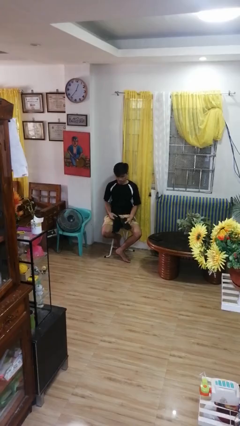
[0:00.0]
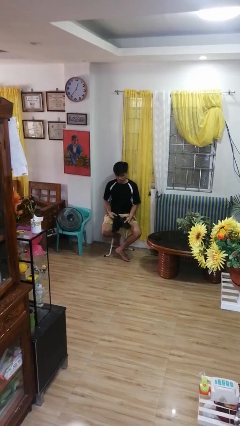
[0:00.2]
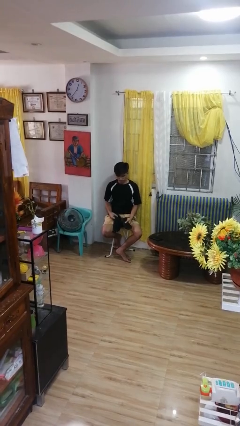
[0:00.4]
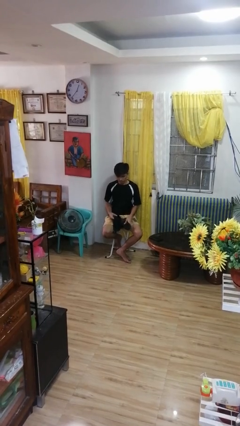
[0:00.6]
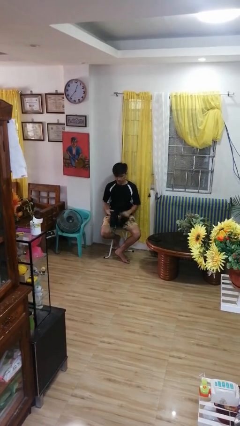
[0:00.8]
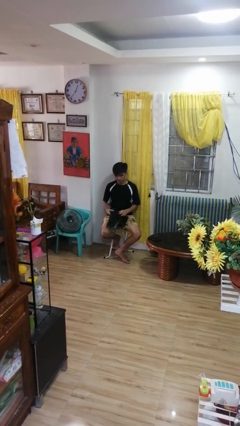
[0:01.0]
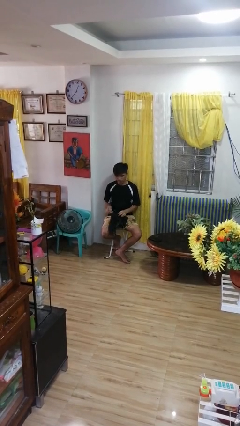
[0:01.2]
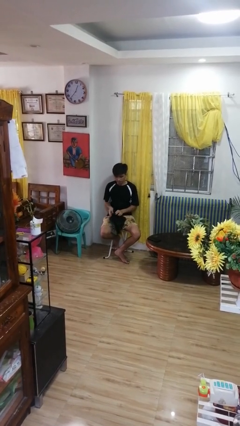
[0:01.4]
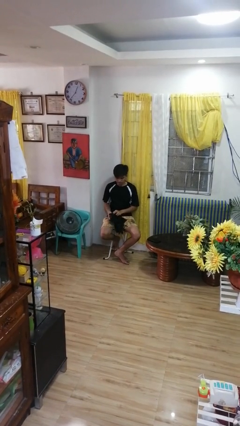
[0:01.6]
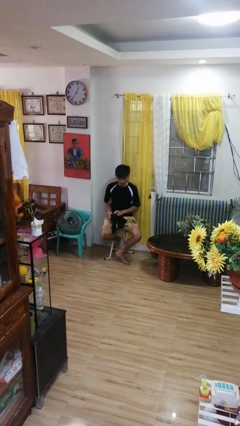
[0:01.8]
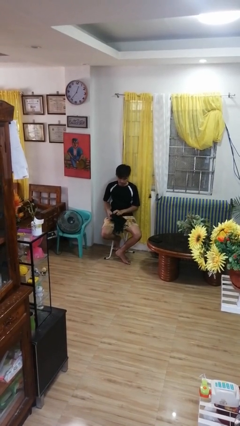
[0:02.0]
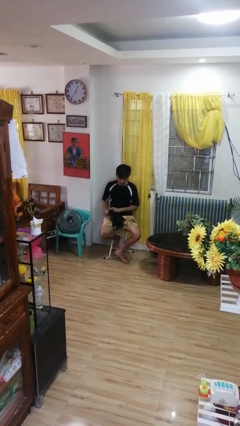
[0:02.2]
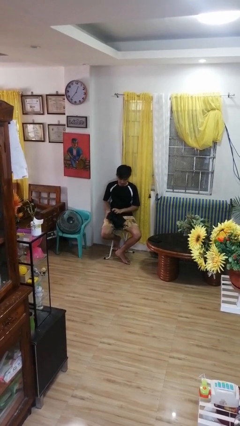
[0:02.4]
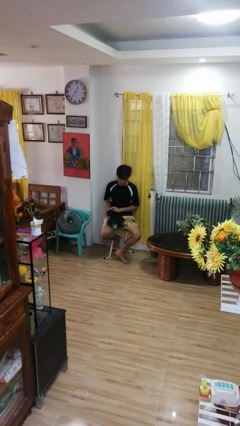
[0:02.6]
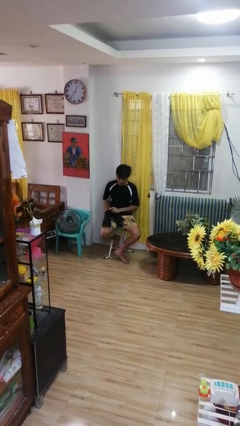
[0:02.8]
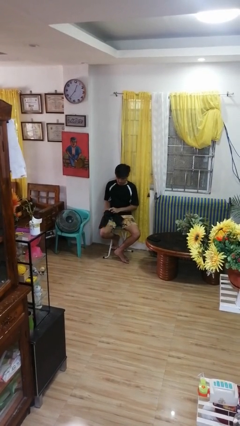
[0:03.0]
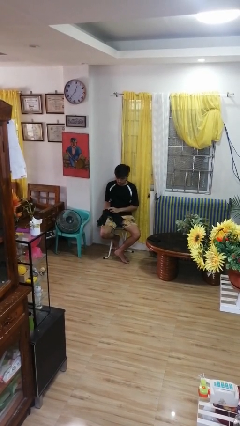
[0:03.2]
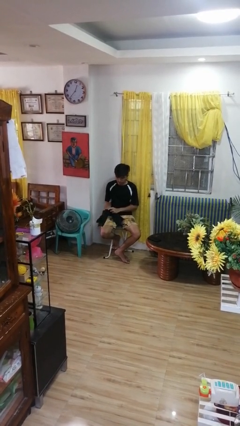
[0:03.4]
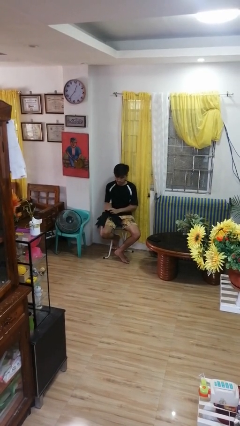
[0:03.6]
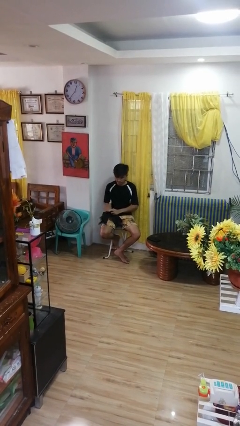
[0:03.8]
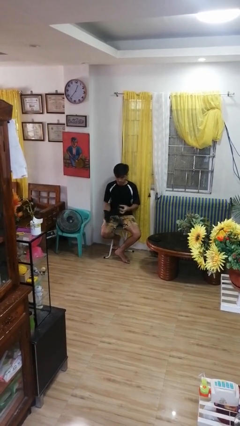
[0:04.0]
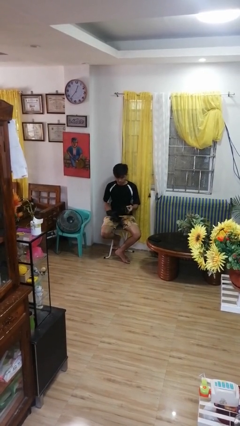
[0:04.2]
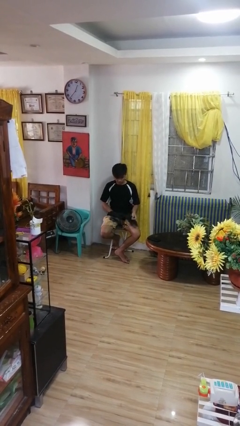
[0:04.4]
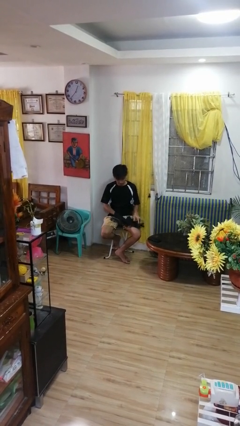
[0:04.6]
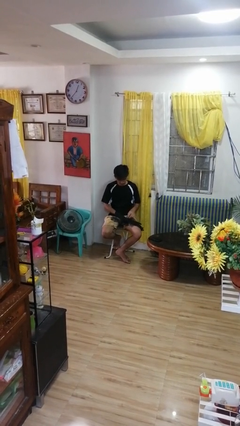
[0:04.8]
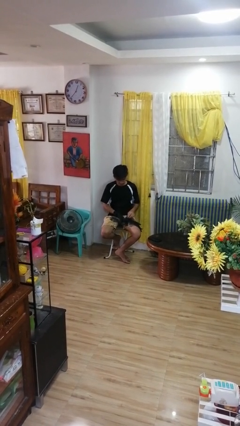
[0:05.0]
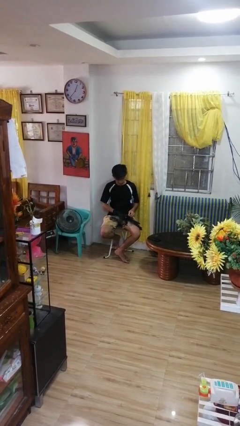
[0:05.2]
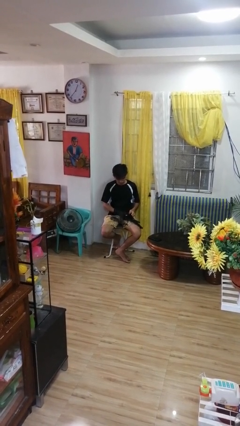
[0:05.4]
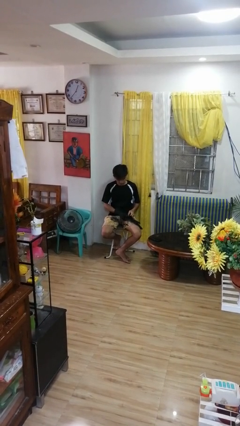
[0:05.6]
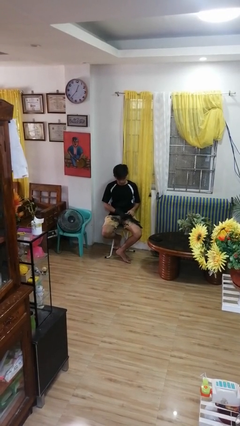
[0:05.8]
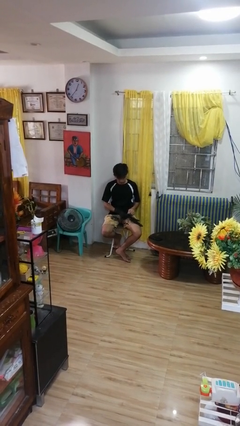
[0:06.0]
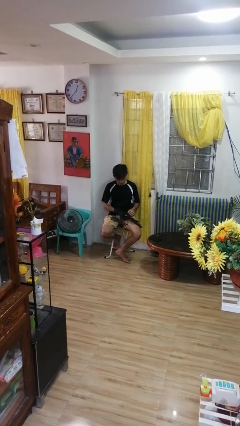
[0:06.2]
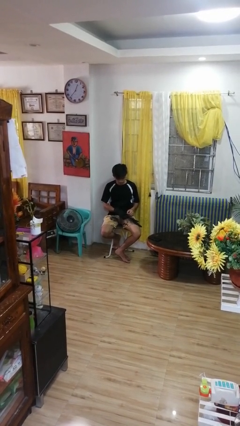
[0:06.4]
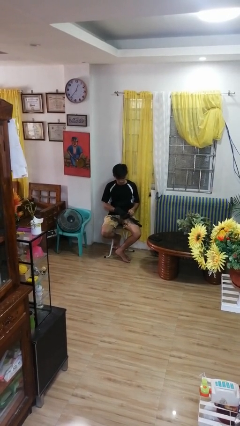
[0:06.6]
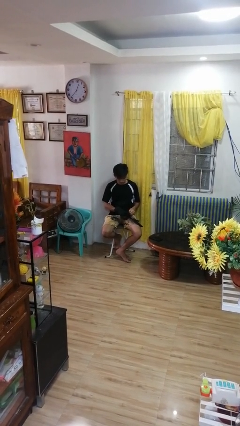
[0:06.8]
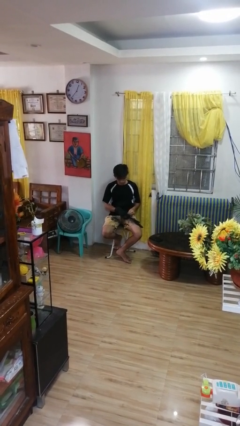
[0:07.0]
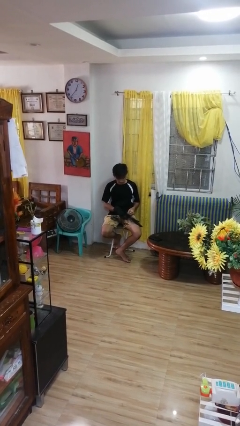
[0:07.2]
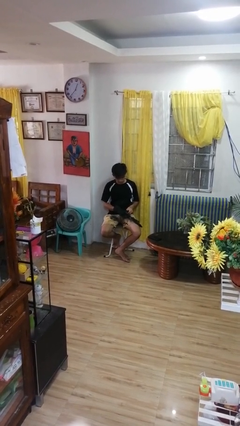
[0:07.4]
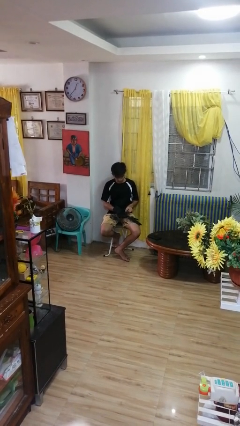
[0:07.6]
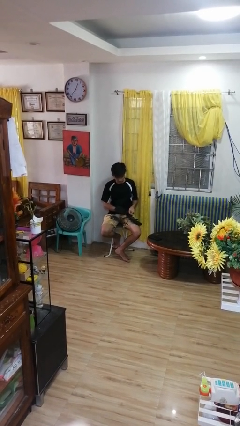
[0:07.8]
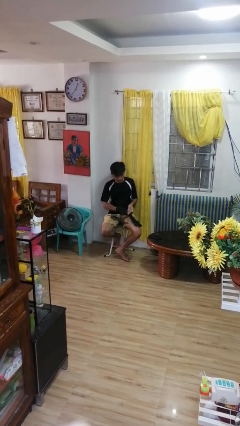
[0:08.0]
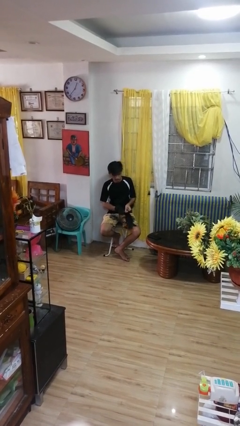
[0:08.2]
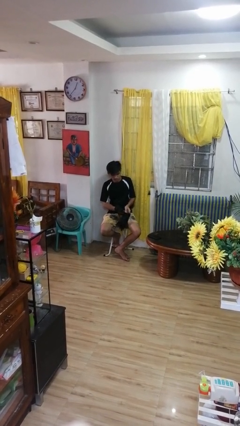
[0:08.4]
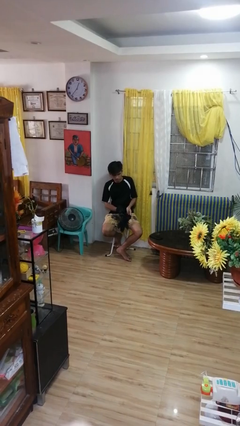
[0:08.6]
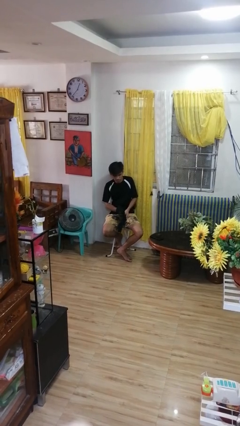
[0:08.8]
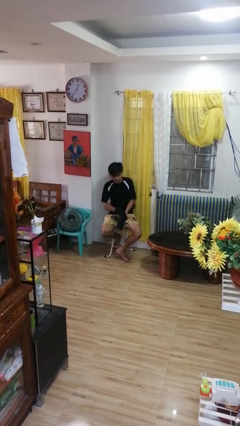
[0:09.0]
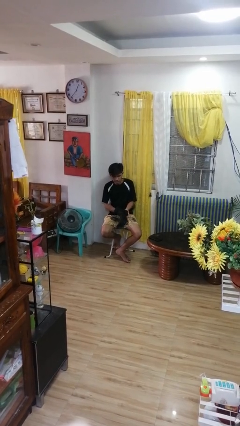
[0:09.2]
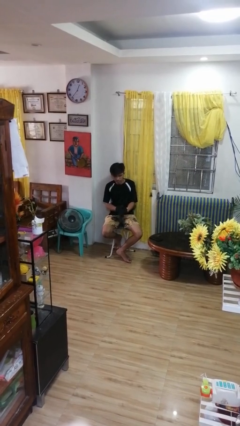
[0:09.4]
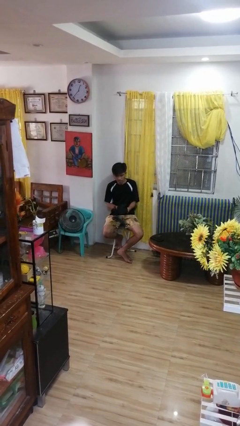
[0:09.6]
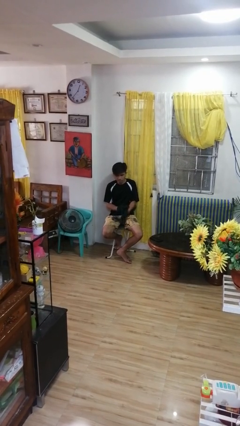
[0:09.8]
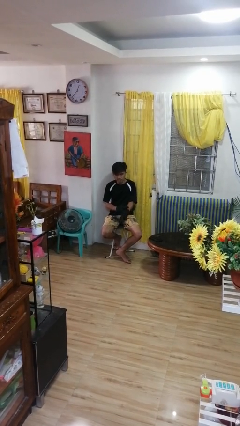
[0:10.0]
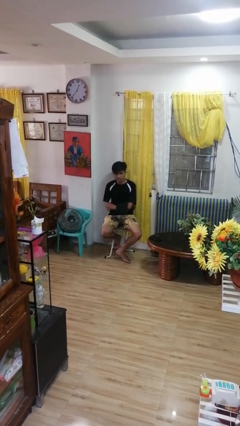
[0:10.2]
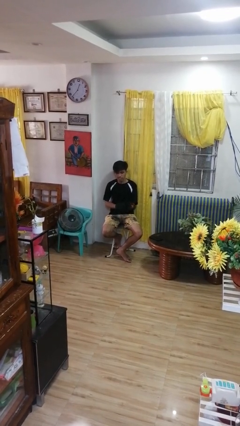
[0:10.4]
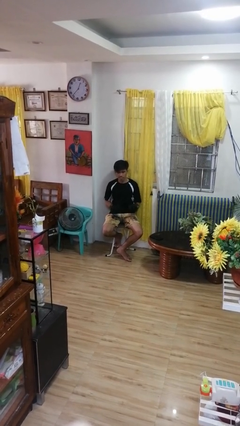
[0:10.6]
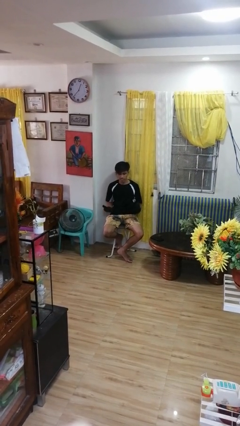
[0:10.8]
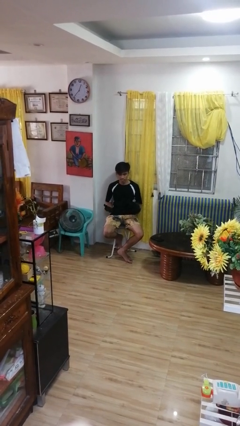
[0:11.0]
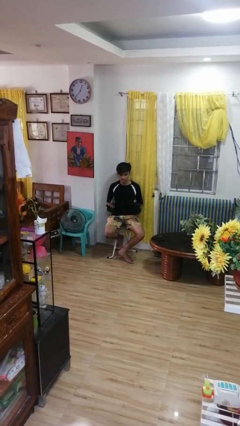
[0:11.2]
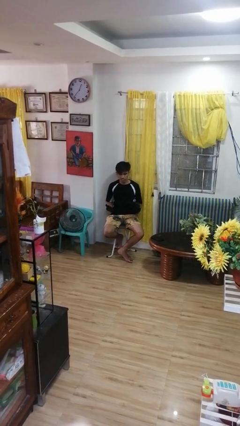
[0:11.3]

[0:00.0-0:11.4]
person puts on gloves

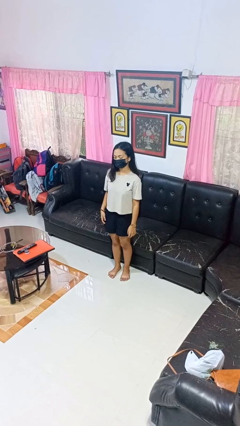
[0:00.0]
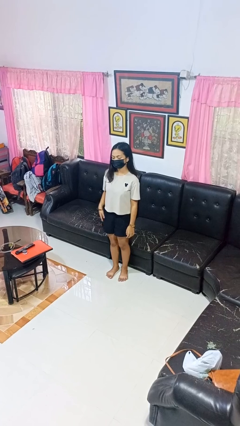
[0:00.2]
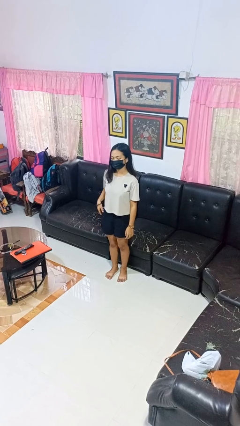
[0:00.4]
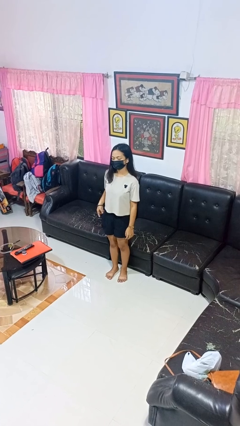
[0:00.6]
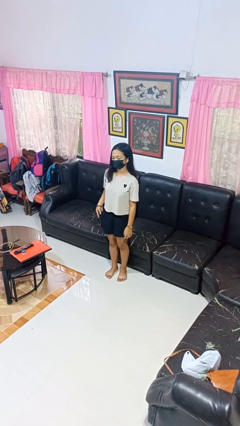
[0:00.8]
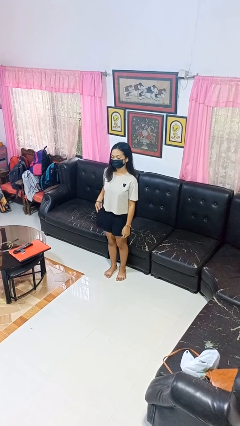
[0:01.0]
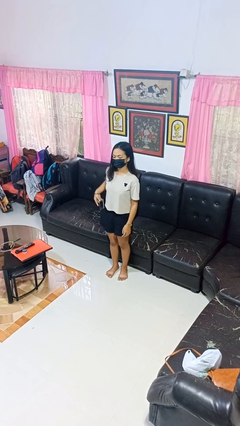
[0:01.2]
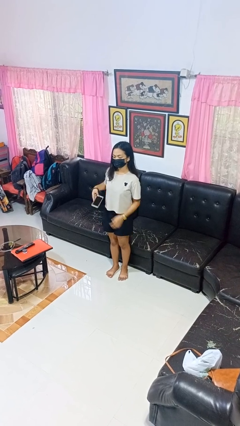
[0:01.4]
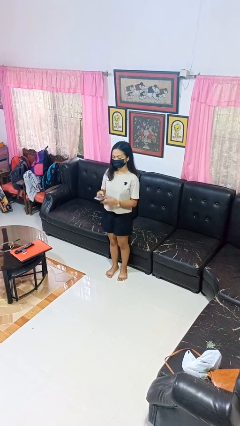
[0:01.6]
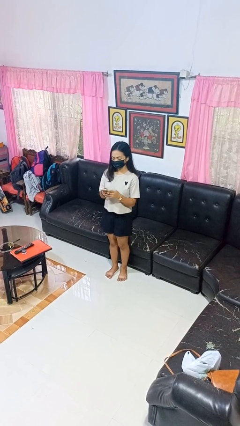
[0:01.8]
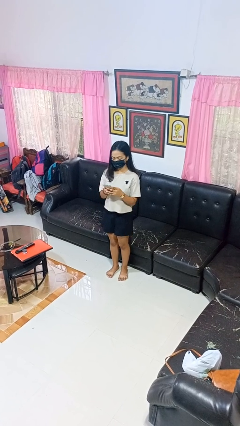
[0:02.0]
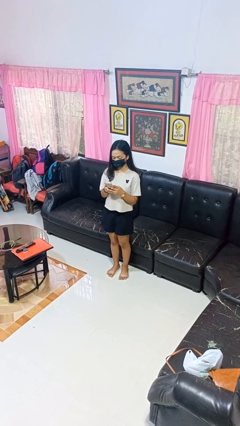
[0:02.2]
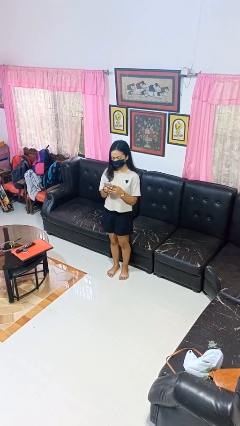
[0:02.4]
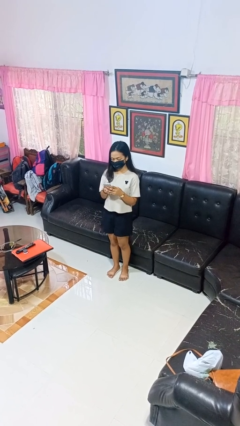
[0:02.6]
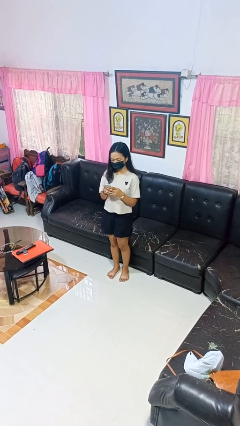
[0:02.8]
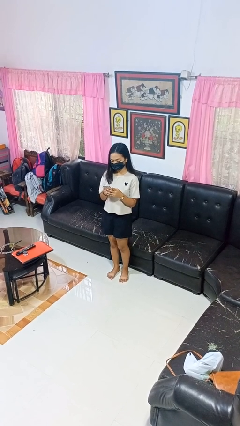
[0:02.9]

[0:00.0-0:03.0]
person takes phone from pocket

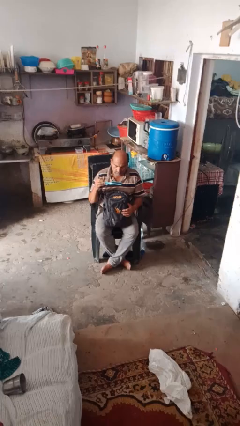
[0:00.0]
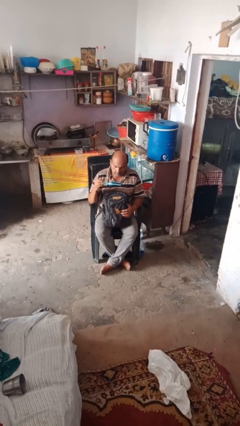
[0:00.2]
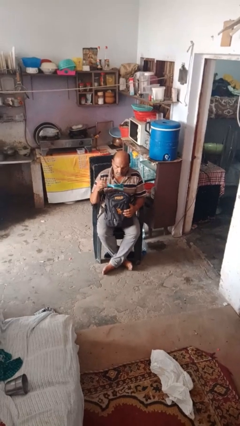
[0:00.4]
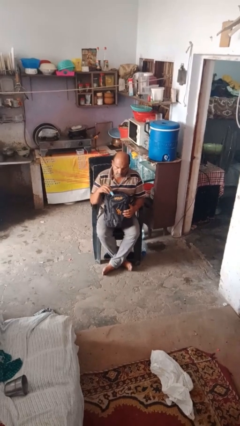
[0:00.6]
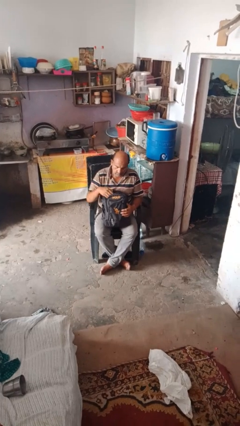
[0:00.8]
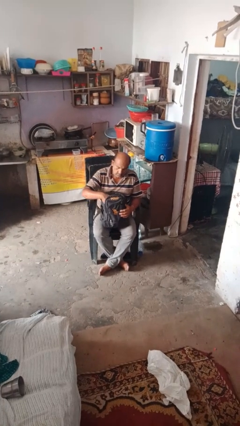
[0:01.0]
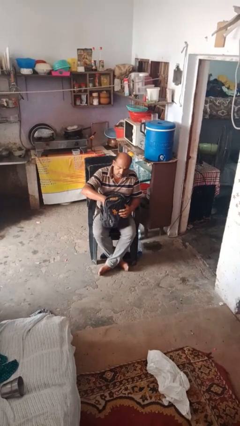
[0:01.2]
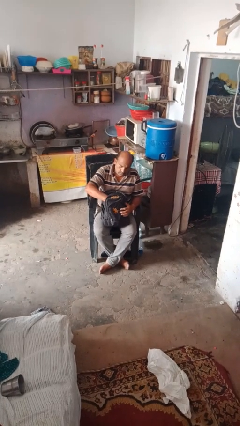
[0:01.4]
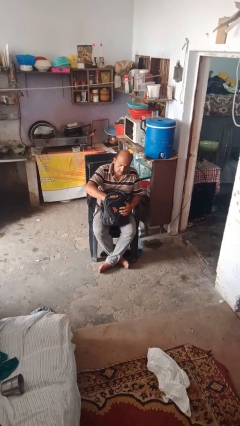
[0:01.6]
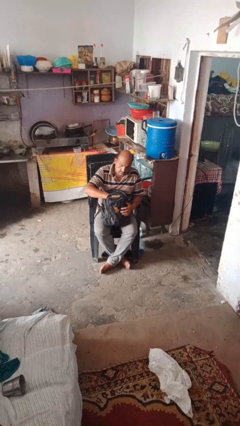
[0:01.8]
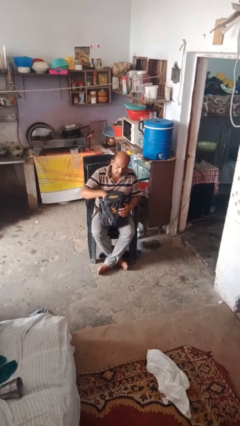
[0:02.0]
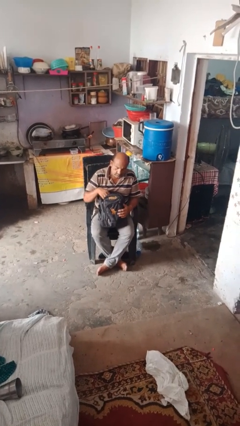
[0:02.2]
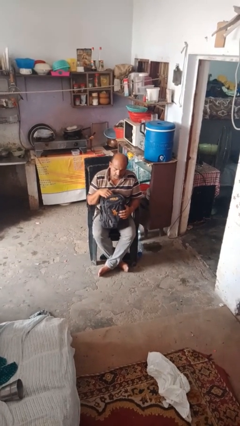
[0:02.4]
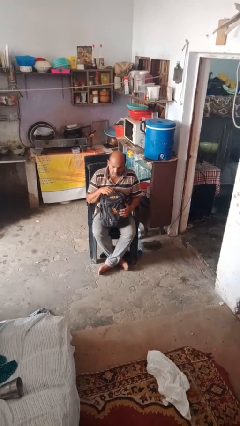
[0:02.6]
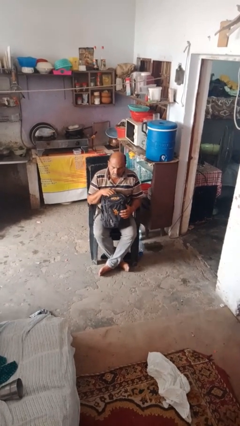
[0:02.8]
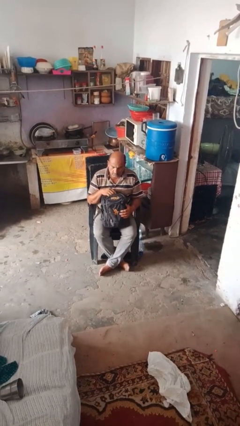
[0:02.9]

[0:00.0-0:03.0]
person puts object into backpack

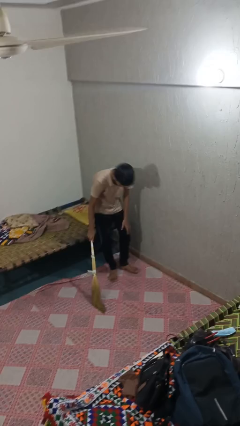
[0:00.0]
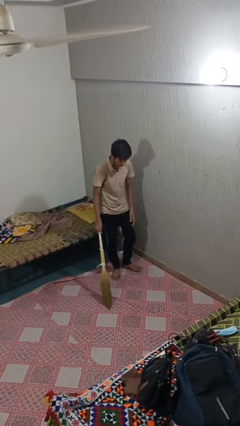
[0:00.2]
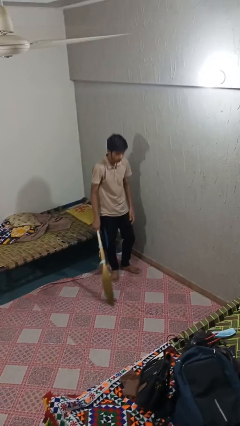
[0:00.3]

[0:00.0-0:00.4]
person sweeps floor
